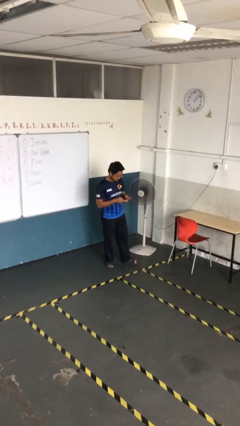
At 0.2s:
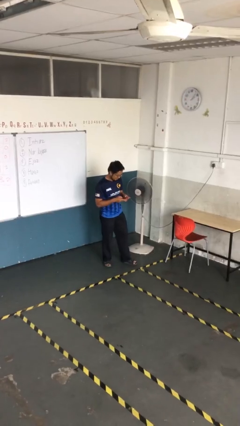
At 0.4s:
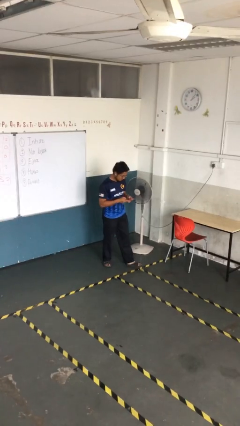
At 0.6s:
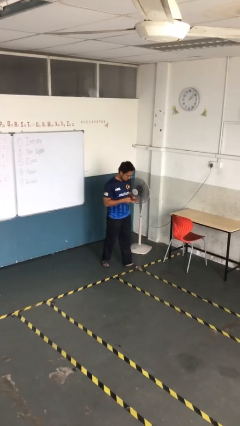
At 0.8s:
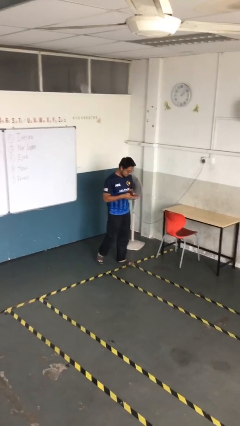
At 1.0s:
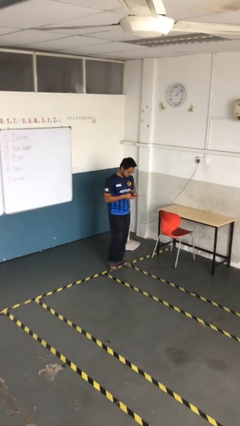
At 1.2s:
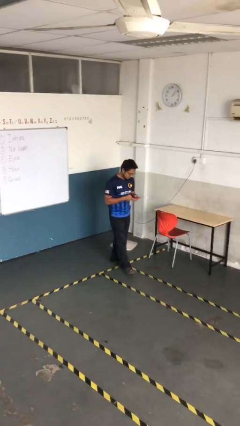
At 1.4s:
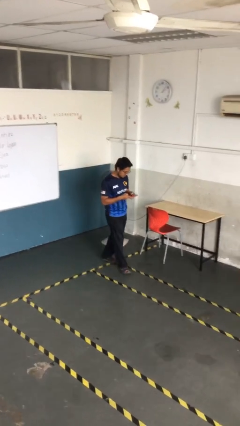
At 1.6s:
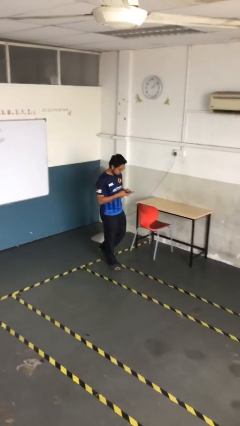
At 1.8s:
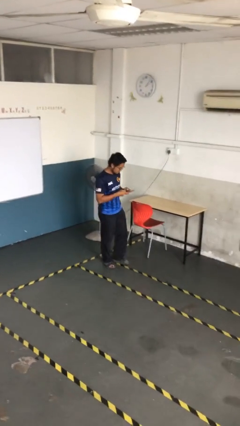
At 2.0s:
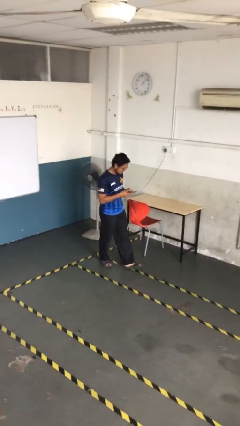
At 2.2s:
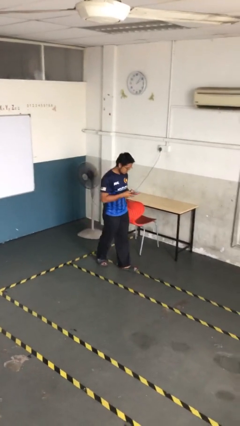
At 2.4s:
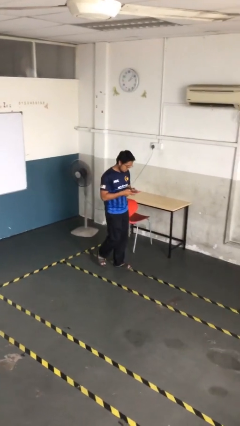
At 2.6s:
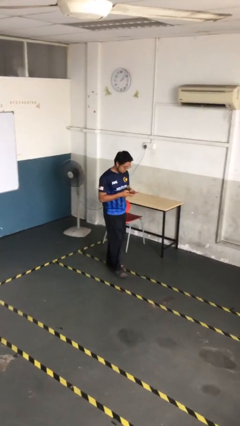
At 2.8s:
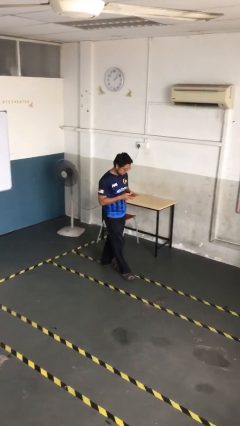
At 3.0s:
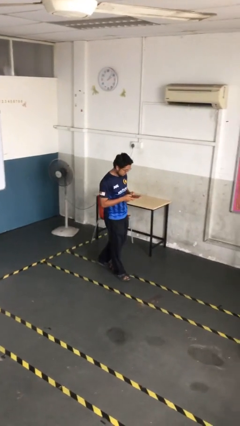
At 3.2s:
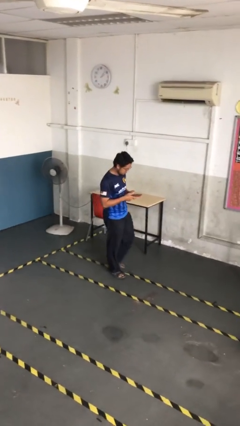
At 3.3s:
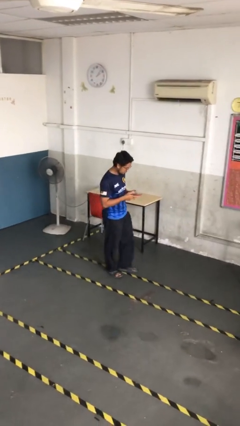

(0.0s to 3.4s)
person texts on phone

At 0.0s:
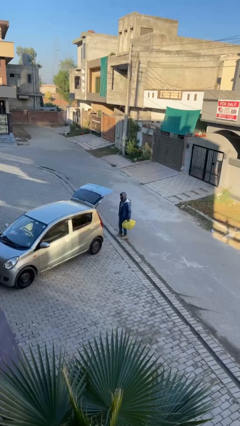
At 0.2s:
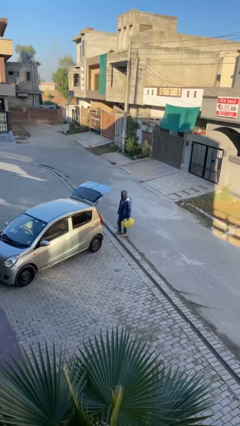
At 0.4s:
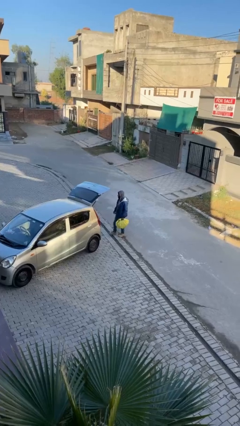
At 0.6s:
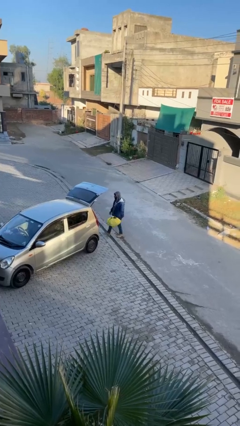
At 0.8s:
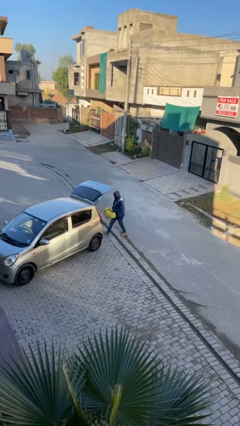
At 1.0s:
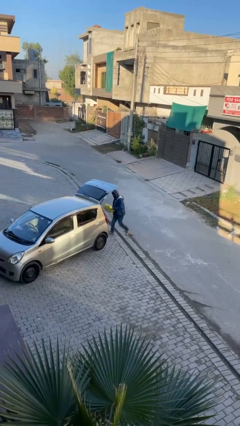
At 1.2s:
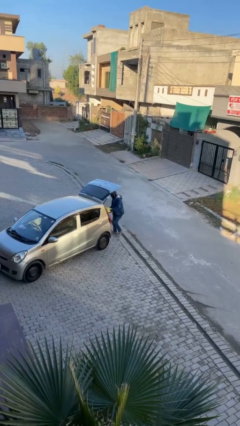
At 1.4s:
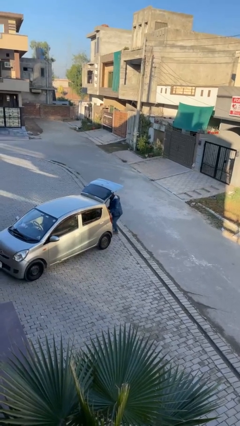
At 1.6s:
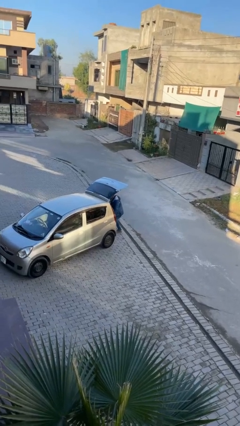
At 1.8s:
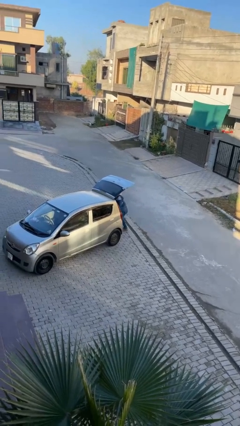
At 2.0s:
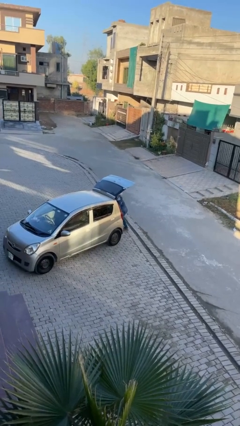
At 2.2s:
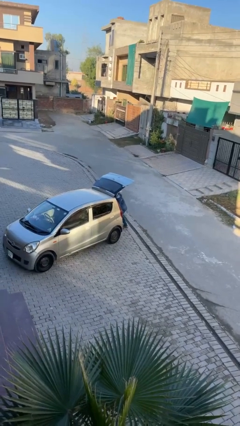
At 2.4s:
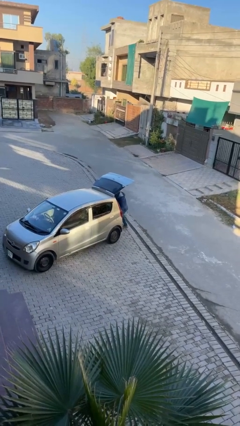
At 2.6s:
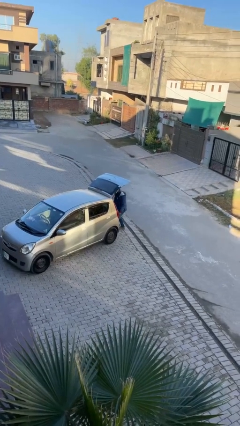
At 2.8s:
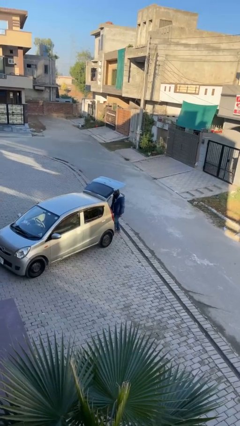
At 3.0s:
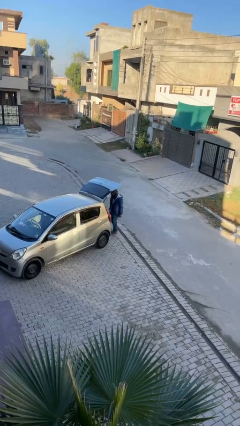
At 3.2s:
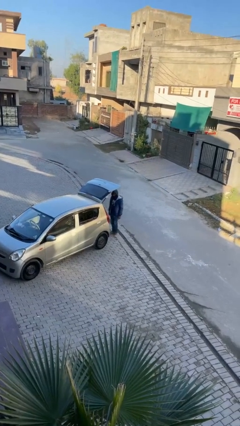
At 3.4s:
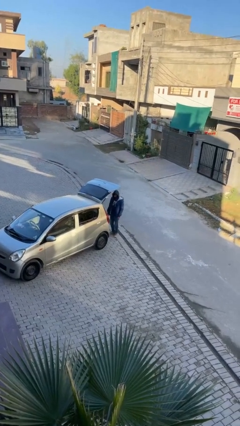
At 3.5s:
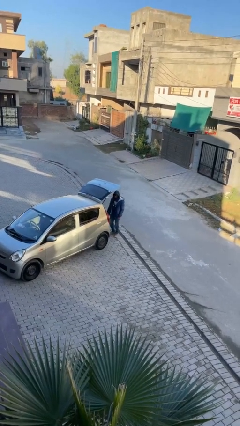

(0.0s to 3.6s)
person loads car

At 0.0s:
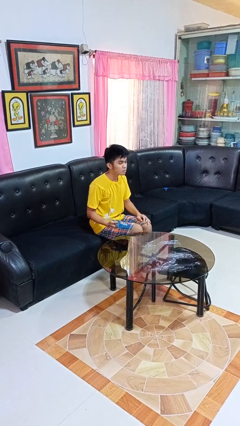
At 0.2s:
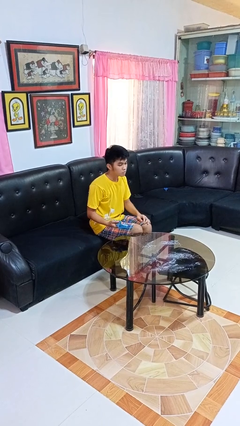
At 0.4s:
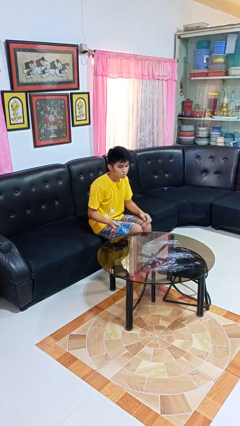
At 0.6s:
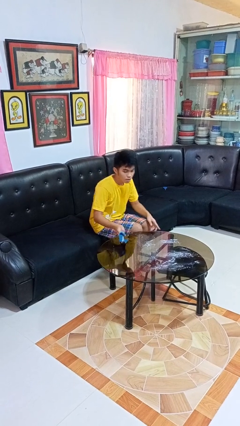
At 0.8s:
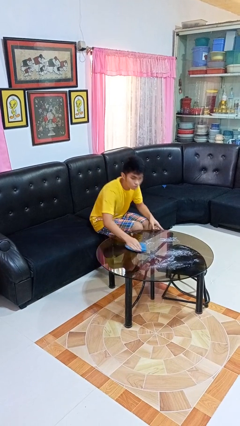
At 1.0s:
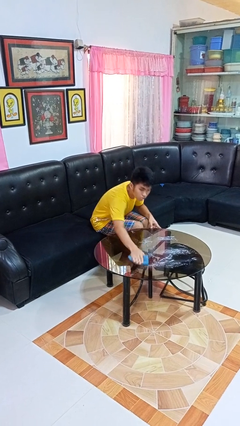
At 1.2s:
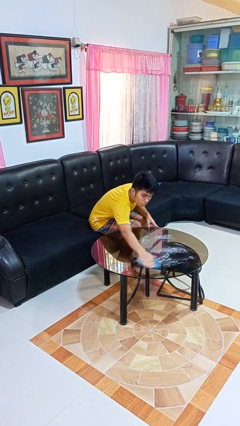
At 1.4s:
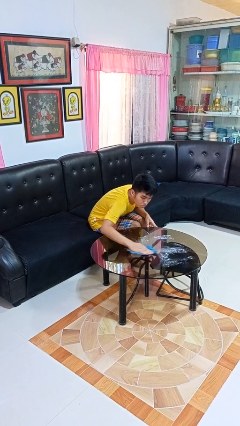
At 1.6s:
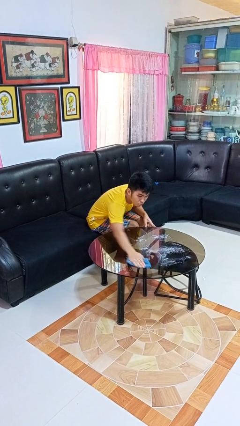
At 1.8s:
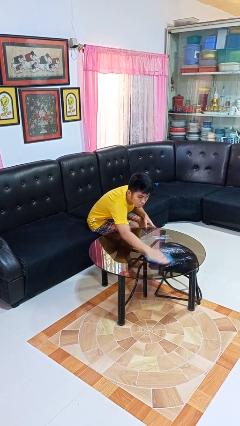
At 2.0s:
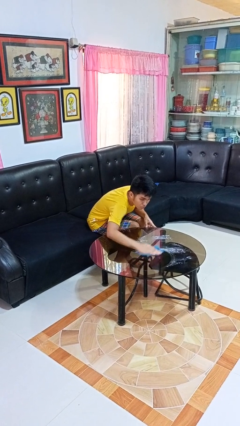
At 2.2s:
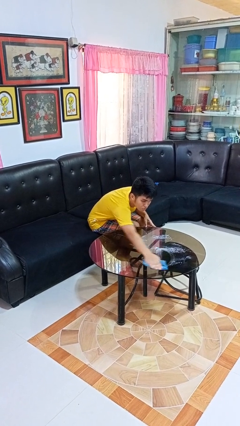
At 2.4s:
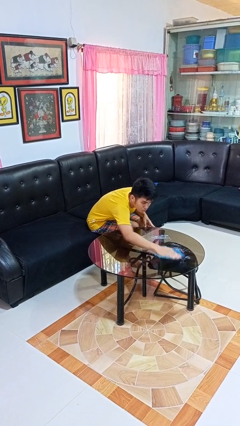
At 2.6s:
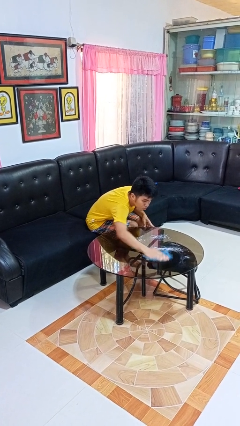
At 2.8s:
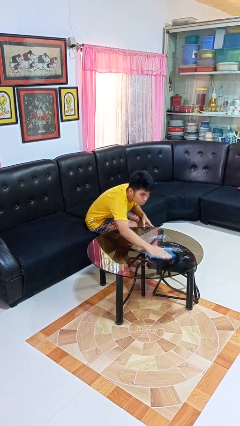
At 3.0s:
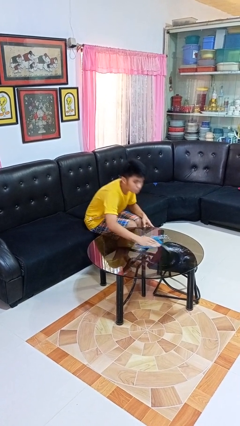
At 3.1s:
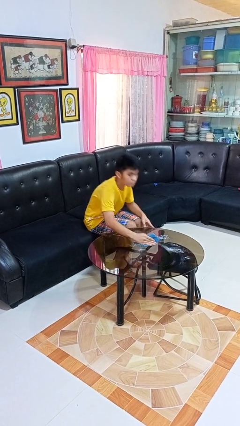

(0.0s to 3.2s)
person cleans table with rag

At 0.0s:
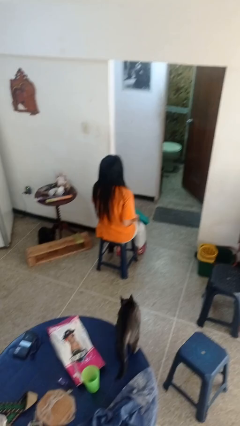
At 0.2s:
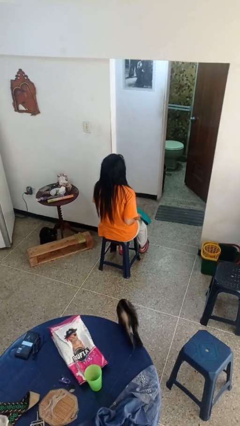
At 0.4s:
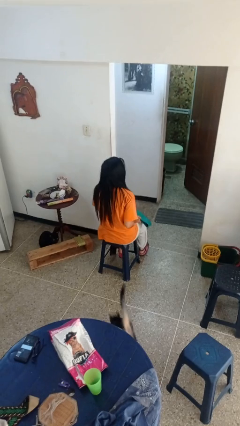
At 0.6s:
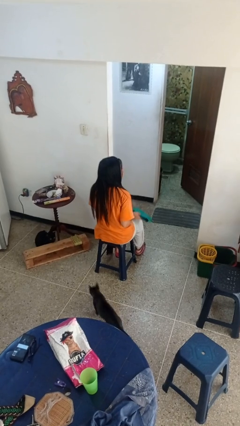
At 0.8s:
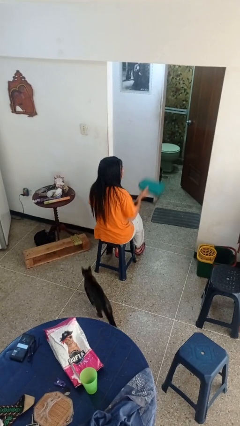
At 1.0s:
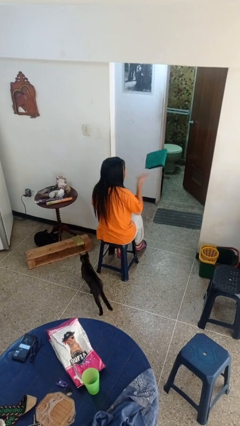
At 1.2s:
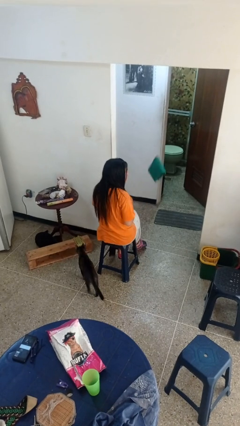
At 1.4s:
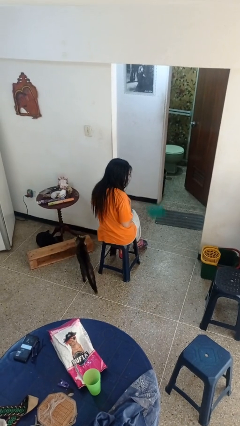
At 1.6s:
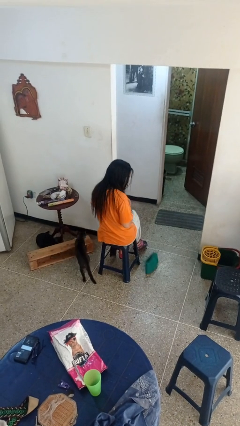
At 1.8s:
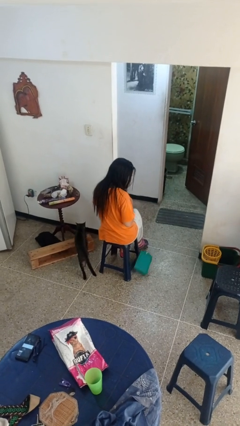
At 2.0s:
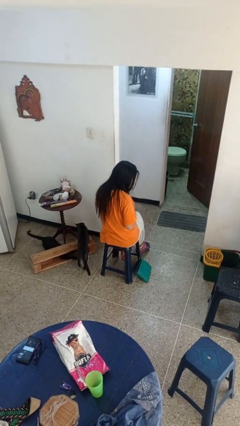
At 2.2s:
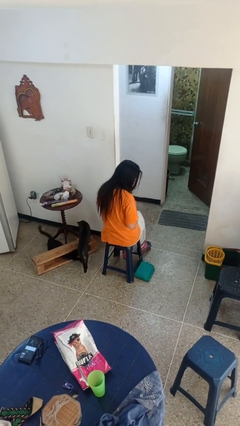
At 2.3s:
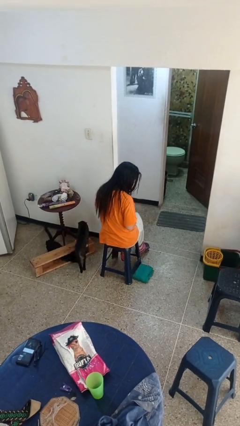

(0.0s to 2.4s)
person throws object into air

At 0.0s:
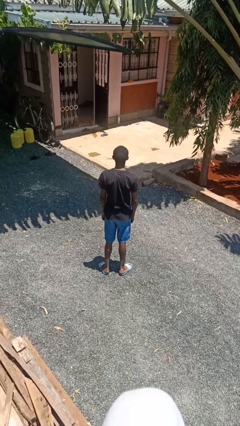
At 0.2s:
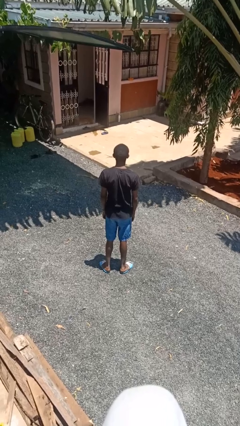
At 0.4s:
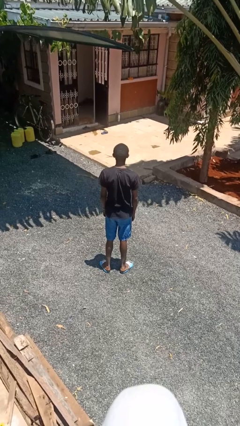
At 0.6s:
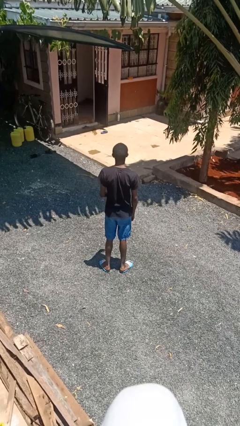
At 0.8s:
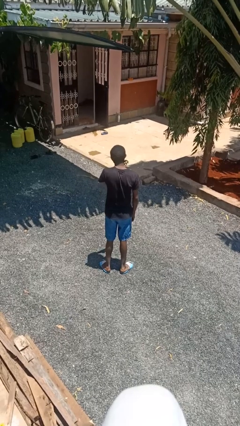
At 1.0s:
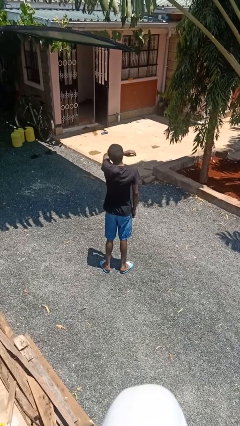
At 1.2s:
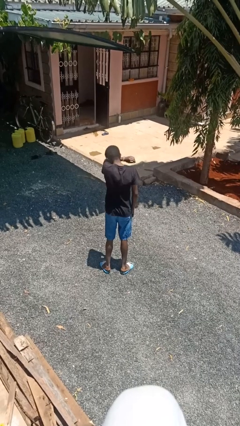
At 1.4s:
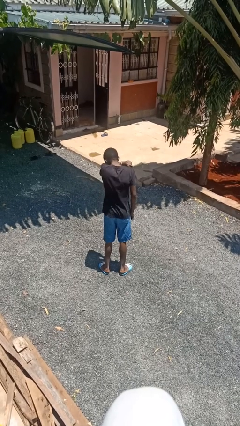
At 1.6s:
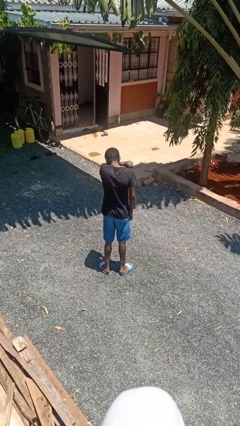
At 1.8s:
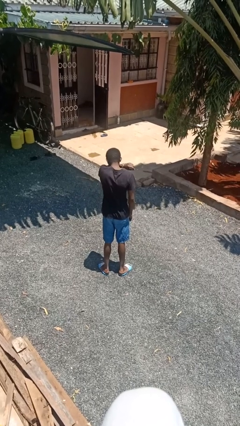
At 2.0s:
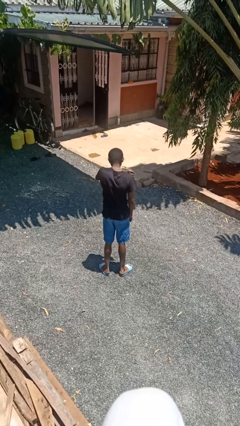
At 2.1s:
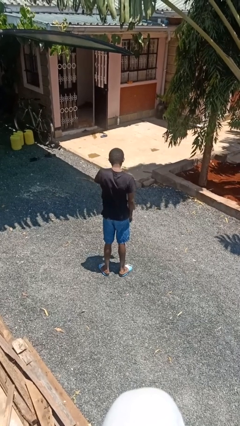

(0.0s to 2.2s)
person sneezes into arm

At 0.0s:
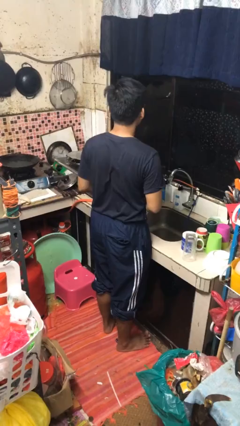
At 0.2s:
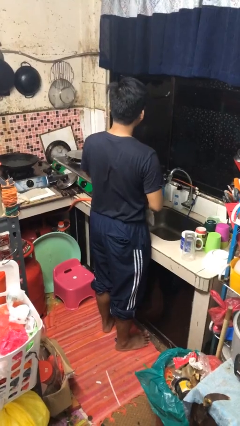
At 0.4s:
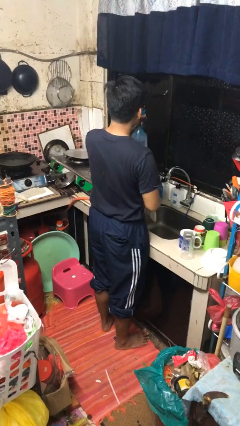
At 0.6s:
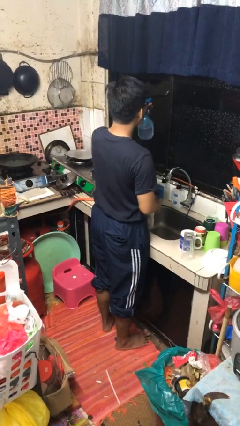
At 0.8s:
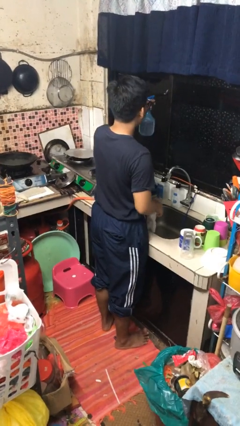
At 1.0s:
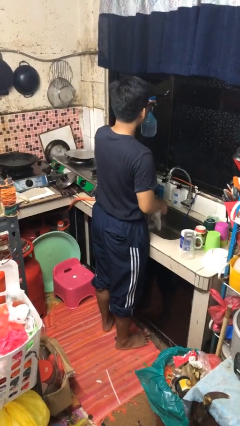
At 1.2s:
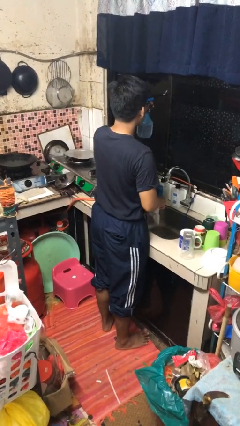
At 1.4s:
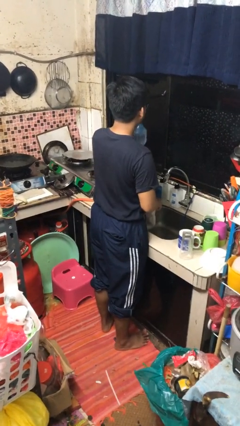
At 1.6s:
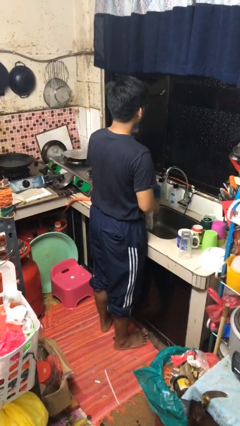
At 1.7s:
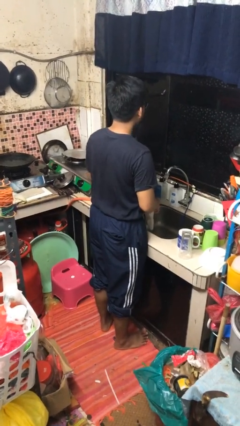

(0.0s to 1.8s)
person sprays from bottle

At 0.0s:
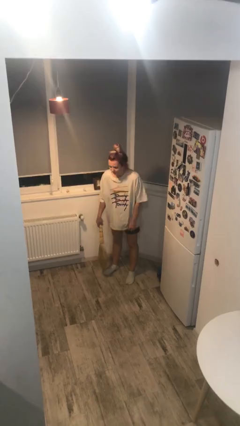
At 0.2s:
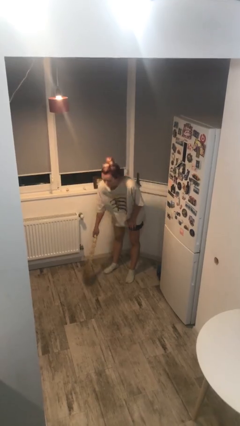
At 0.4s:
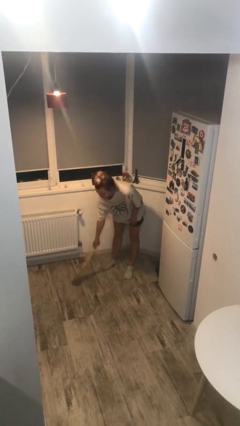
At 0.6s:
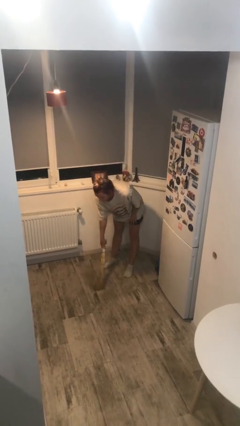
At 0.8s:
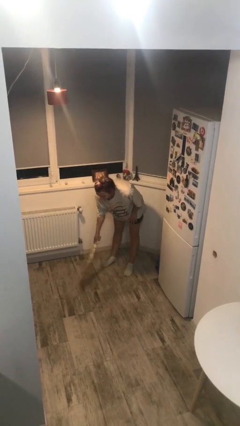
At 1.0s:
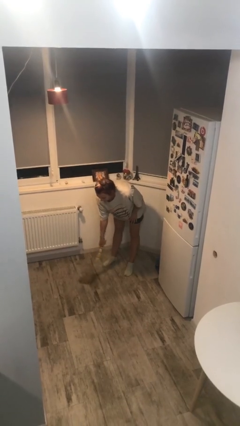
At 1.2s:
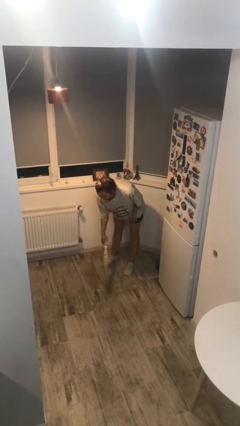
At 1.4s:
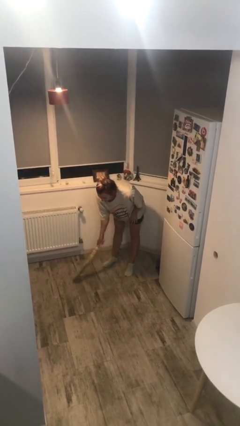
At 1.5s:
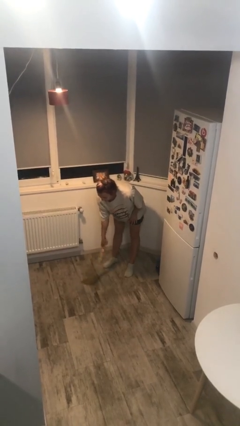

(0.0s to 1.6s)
person sweeps floor
